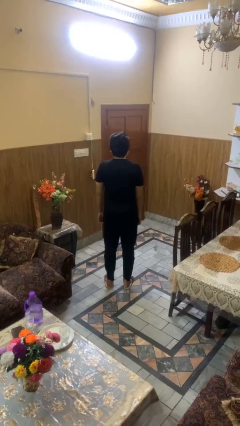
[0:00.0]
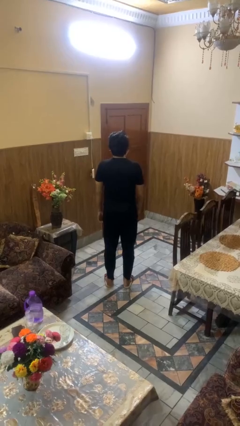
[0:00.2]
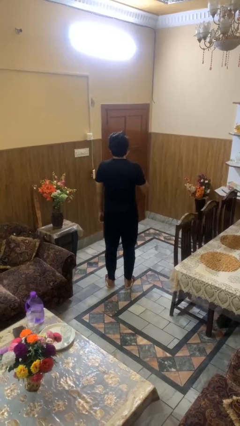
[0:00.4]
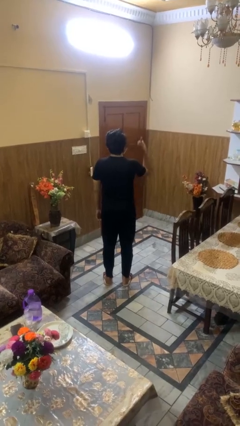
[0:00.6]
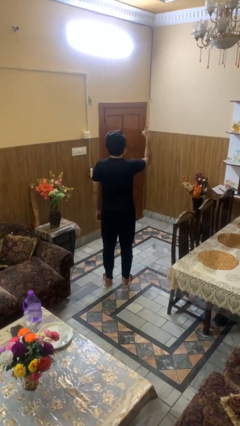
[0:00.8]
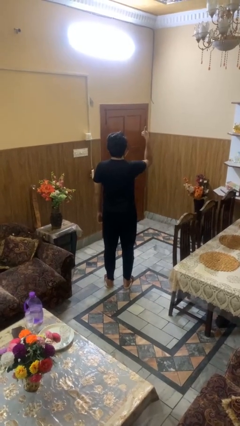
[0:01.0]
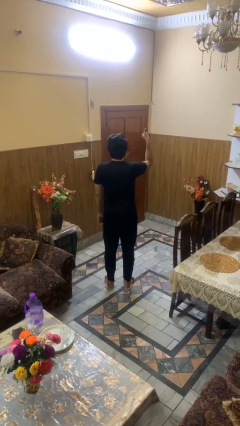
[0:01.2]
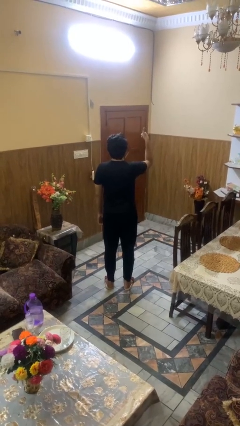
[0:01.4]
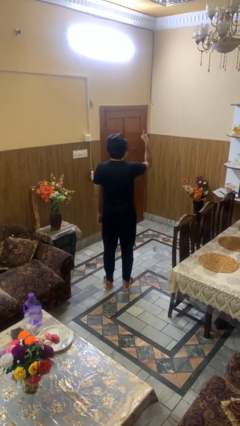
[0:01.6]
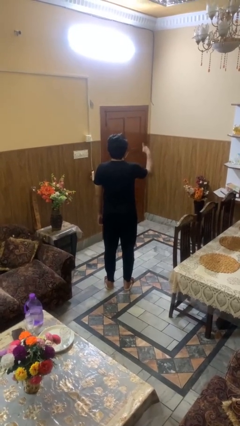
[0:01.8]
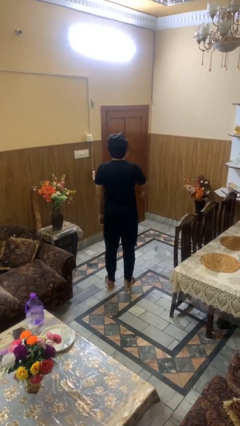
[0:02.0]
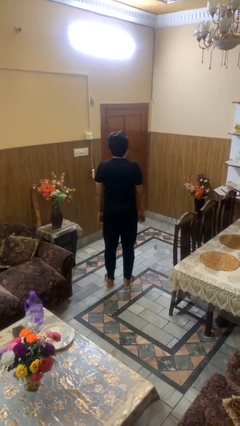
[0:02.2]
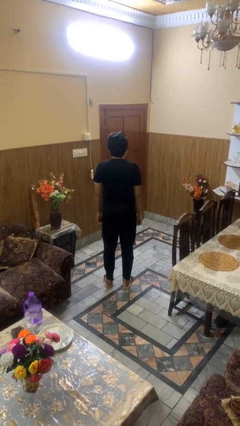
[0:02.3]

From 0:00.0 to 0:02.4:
person gestures thumbs up

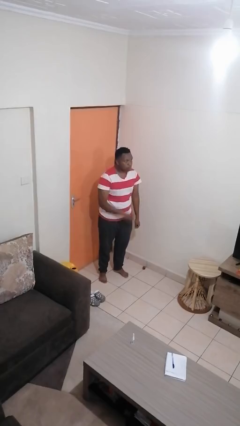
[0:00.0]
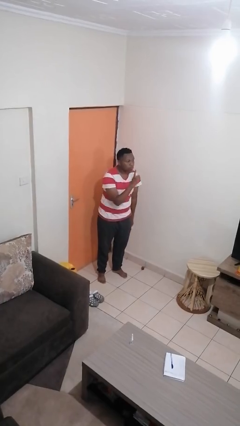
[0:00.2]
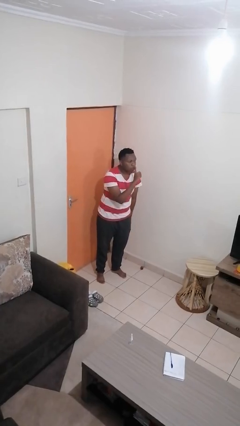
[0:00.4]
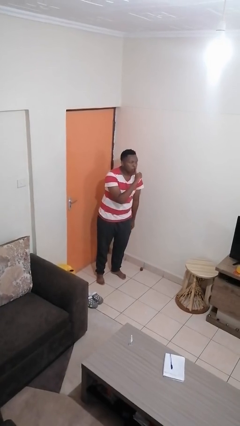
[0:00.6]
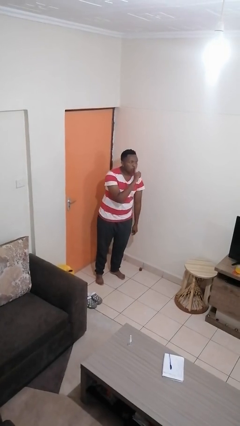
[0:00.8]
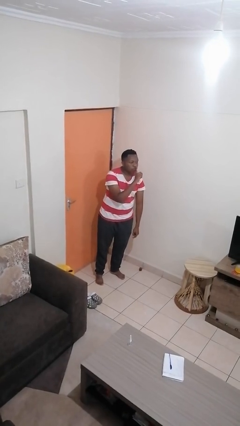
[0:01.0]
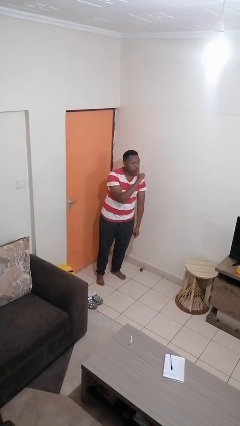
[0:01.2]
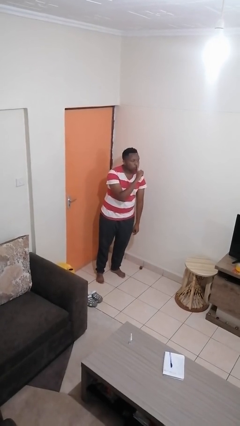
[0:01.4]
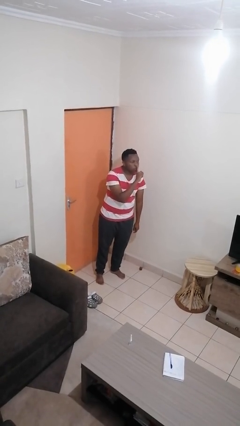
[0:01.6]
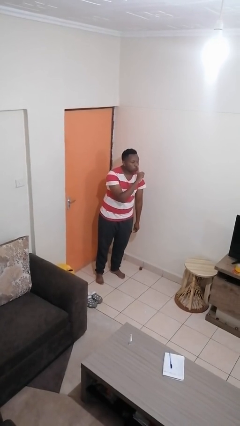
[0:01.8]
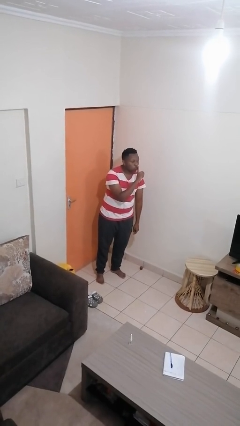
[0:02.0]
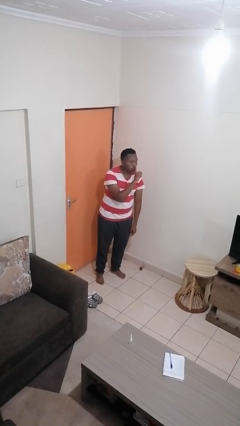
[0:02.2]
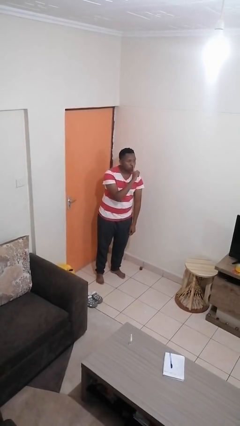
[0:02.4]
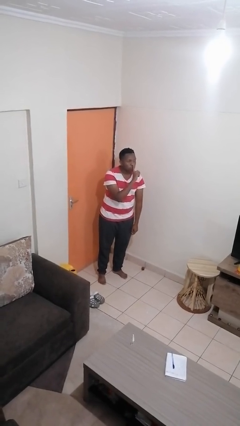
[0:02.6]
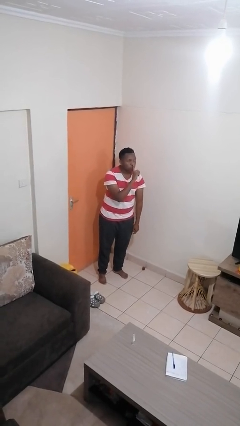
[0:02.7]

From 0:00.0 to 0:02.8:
person gestures be quiet

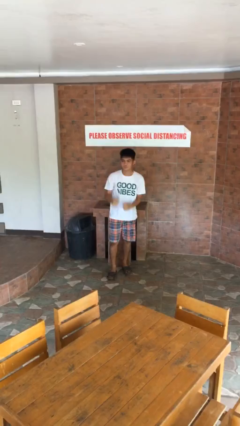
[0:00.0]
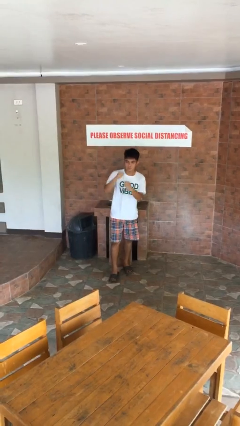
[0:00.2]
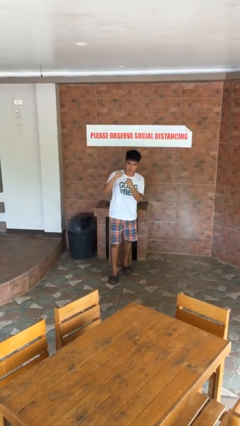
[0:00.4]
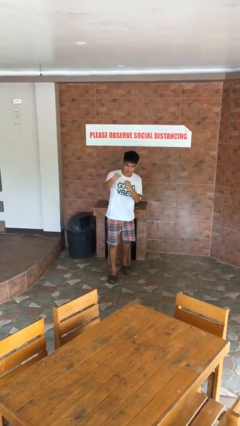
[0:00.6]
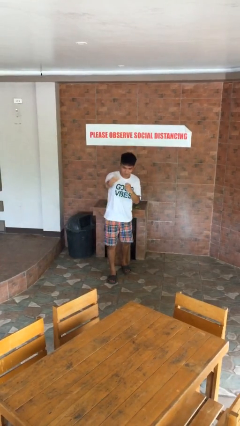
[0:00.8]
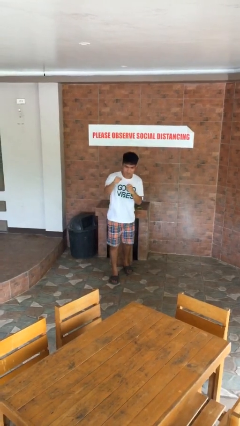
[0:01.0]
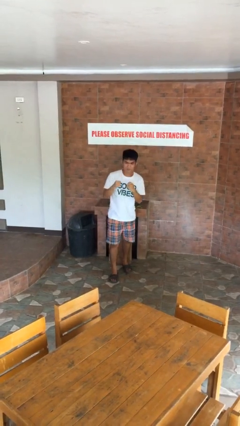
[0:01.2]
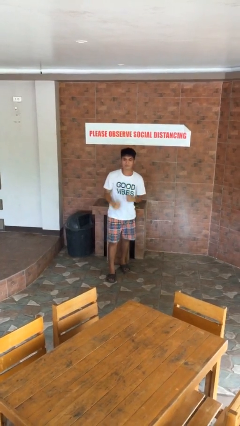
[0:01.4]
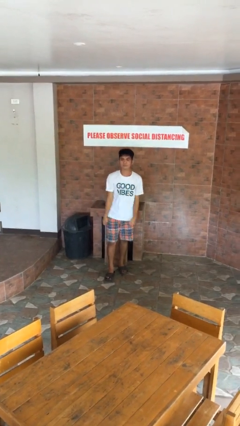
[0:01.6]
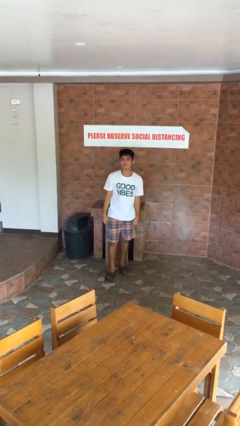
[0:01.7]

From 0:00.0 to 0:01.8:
person punches

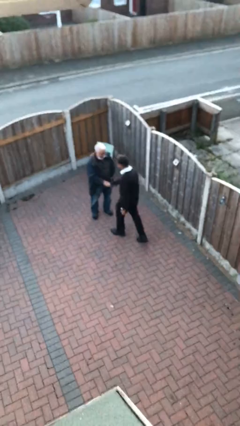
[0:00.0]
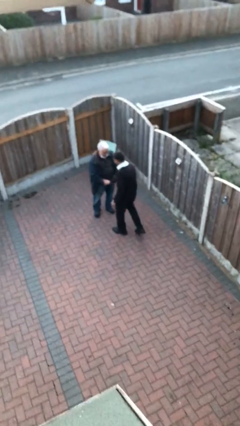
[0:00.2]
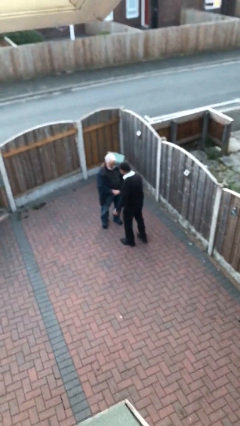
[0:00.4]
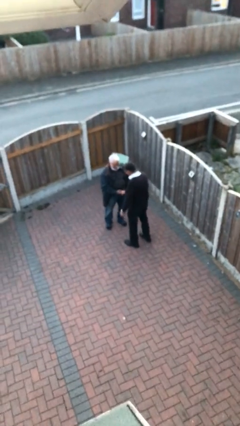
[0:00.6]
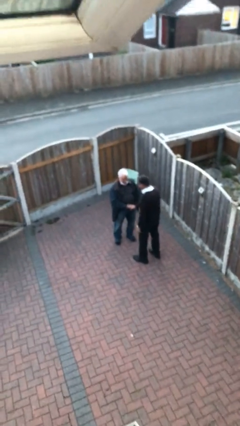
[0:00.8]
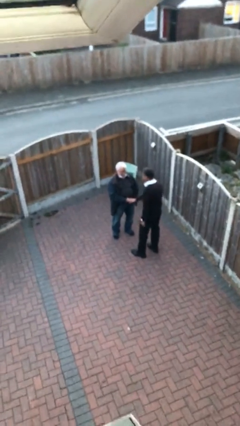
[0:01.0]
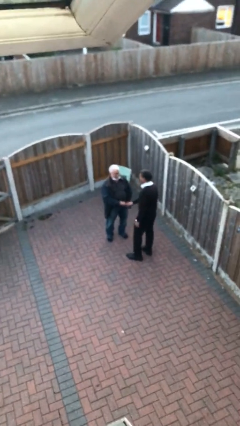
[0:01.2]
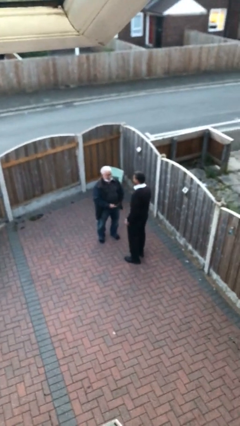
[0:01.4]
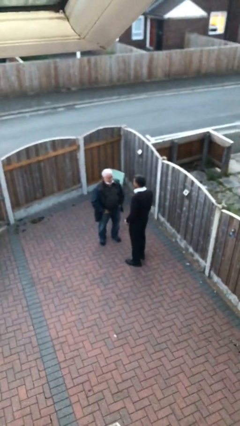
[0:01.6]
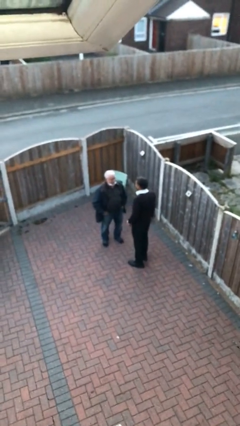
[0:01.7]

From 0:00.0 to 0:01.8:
person highfives hand

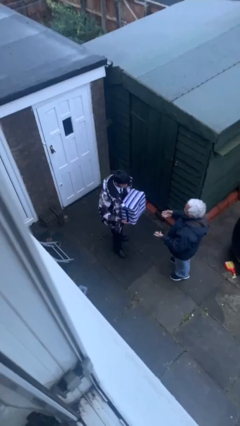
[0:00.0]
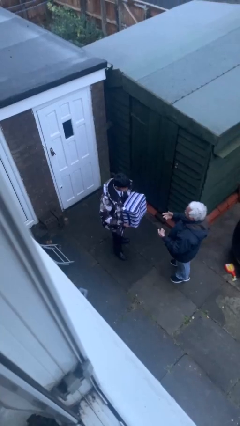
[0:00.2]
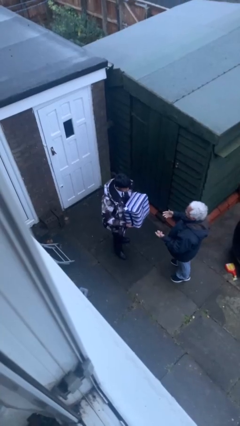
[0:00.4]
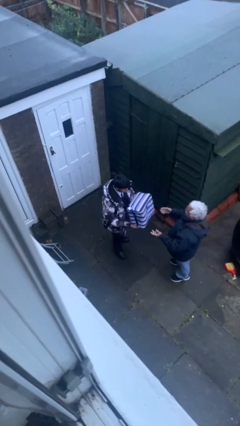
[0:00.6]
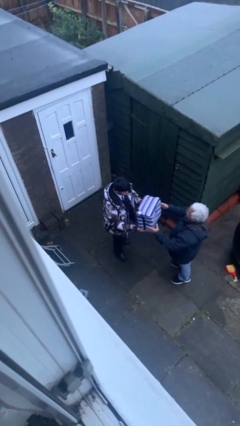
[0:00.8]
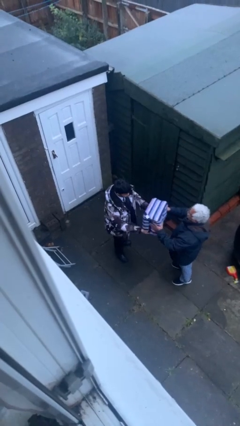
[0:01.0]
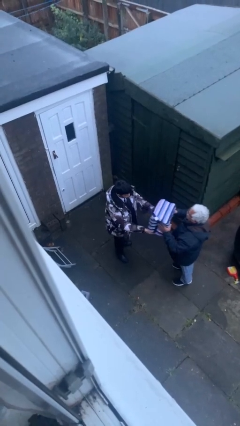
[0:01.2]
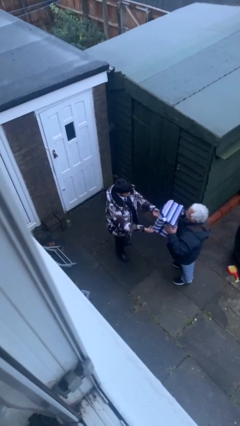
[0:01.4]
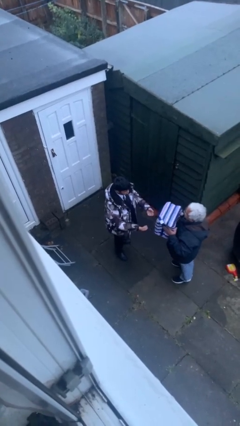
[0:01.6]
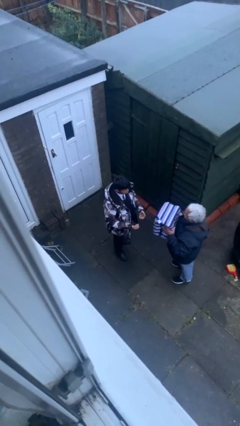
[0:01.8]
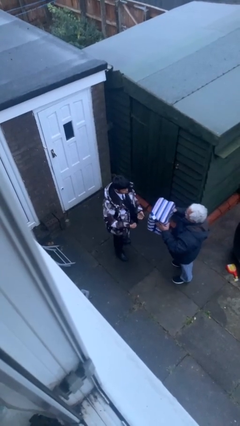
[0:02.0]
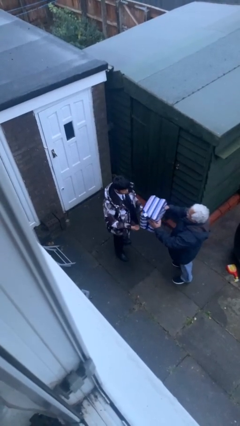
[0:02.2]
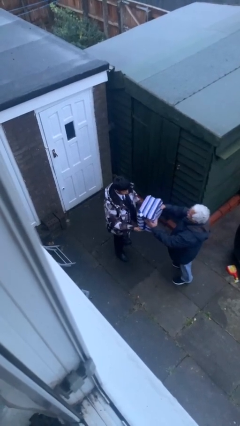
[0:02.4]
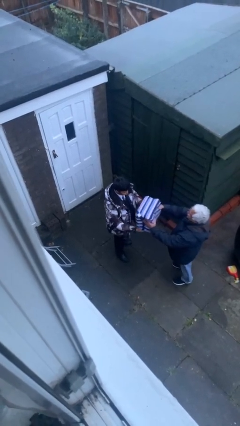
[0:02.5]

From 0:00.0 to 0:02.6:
person transfers object to person

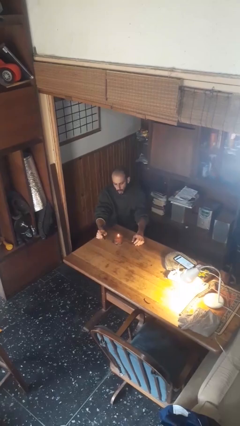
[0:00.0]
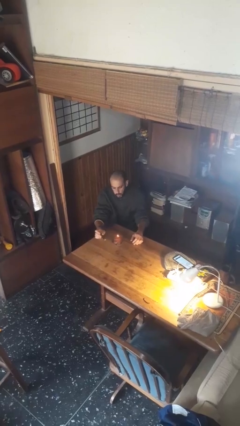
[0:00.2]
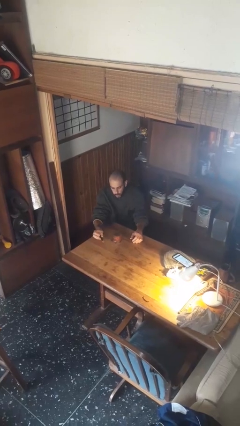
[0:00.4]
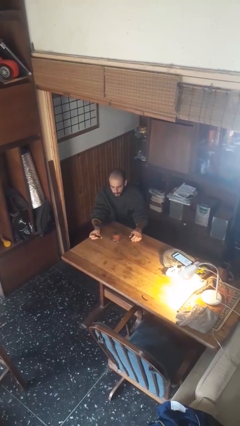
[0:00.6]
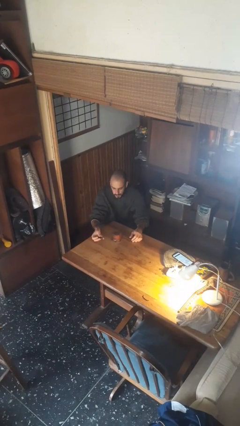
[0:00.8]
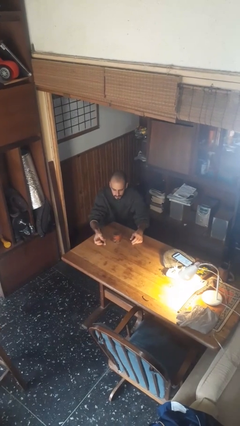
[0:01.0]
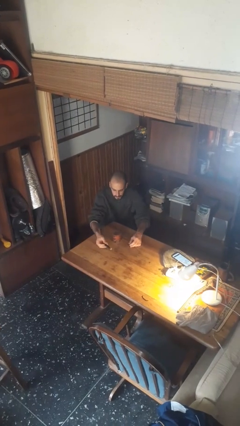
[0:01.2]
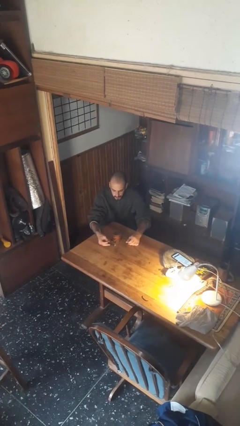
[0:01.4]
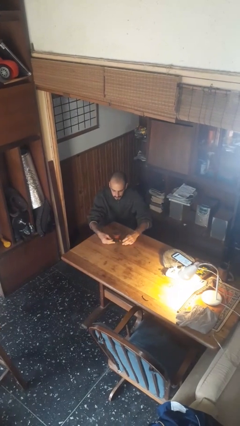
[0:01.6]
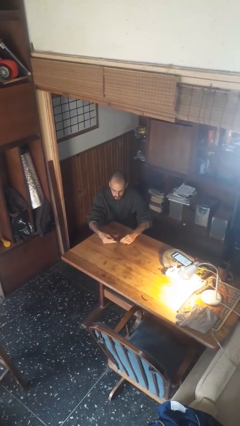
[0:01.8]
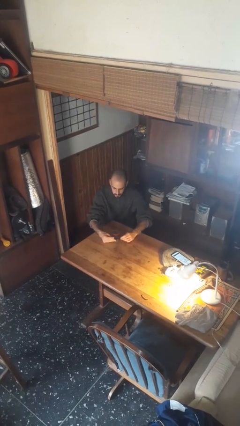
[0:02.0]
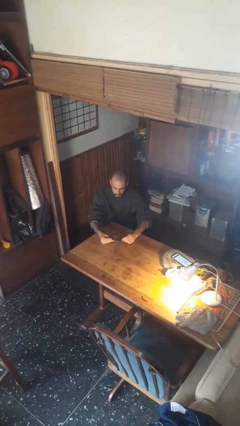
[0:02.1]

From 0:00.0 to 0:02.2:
person extinguishes candle

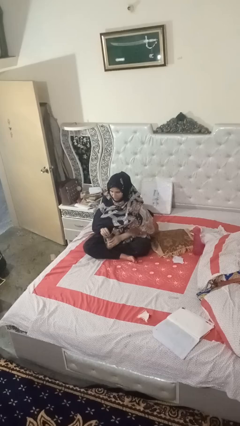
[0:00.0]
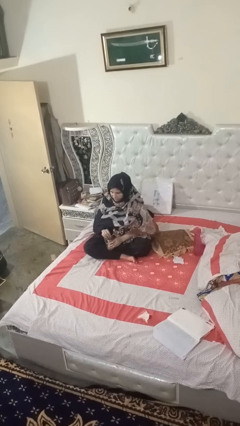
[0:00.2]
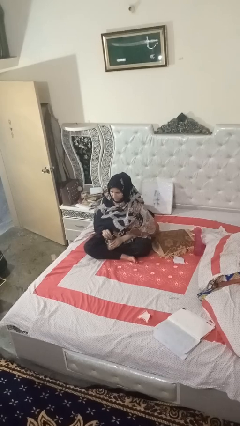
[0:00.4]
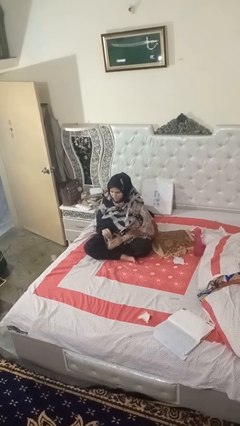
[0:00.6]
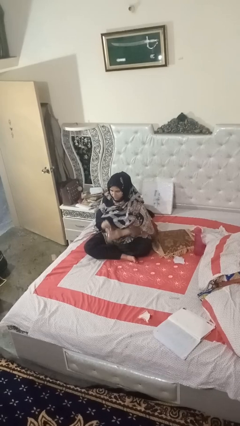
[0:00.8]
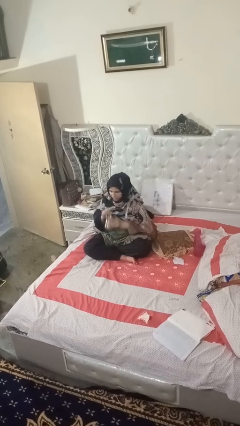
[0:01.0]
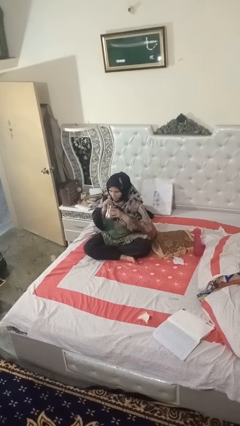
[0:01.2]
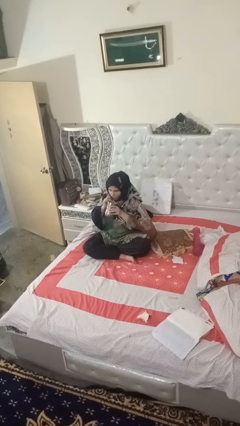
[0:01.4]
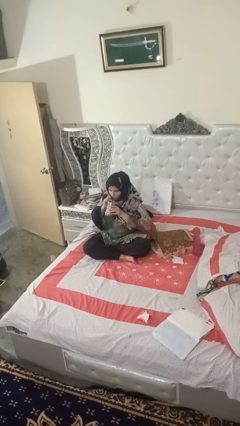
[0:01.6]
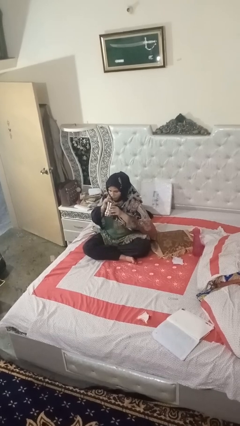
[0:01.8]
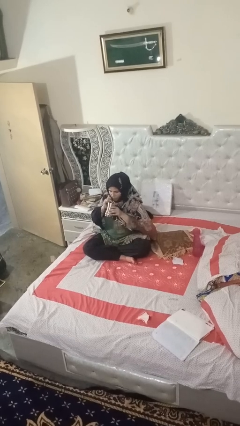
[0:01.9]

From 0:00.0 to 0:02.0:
person drinks from straw

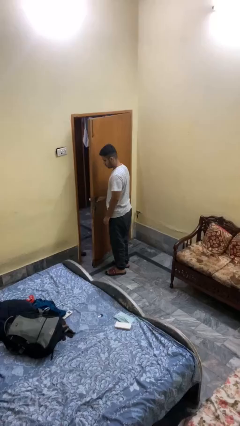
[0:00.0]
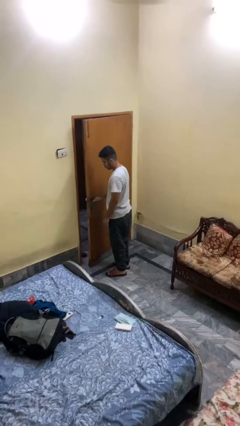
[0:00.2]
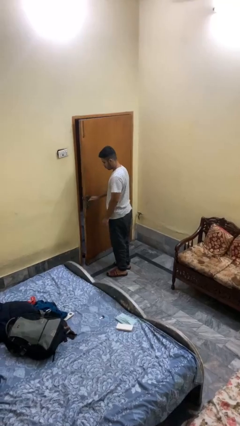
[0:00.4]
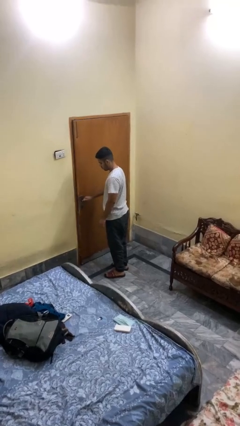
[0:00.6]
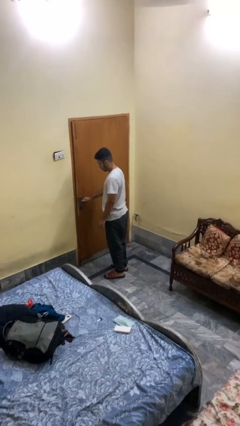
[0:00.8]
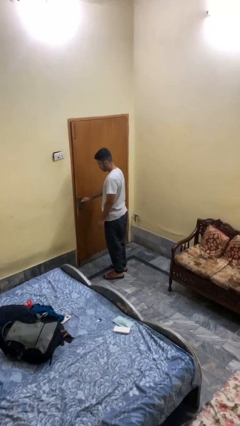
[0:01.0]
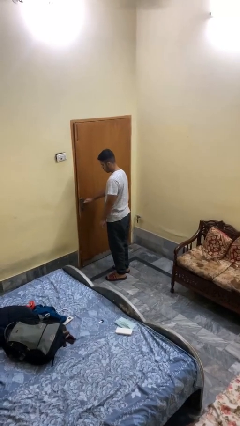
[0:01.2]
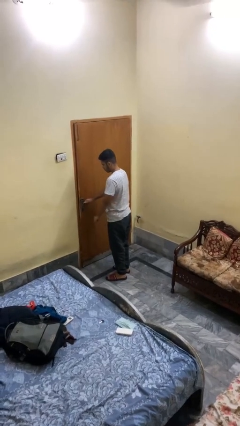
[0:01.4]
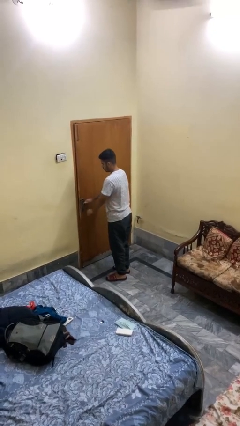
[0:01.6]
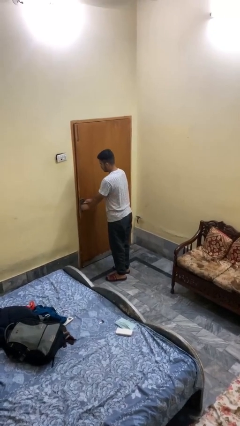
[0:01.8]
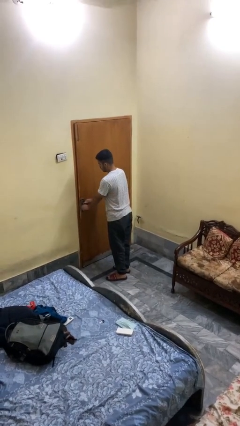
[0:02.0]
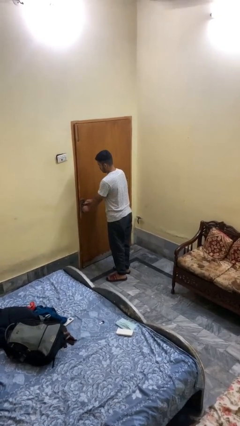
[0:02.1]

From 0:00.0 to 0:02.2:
person closes facility door
